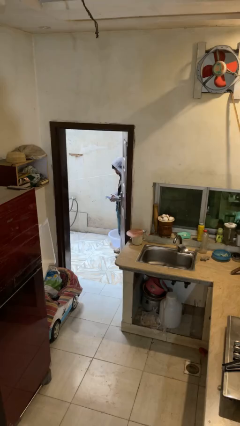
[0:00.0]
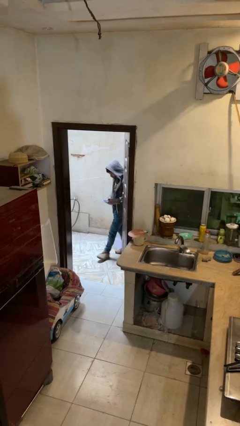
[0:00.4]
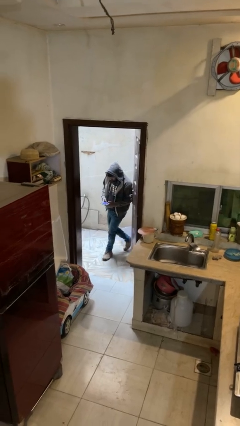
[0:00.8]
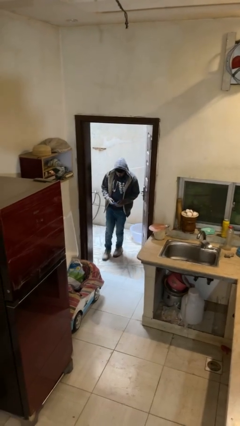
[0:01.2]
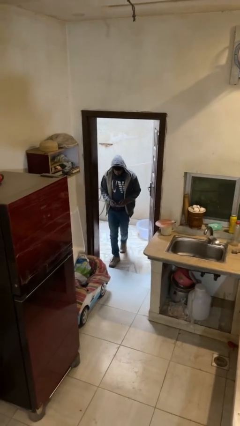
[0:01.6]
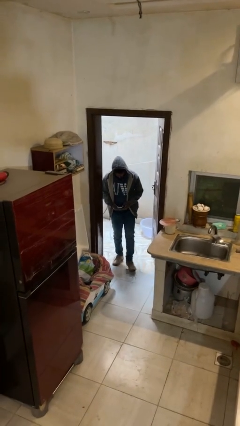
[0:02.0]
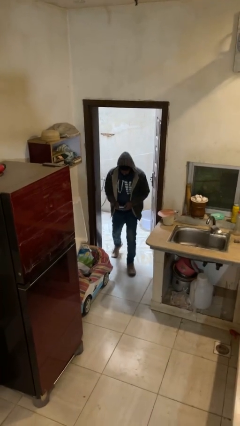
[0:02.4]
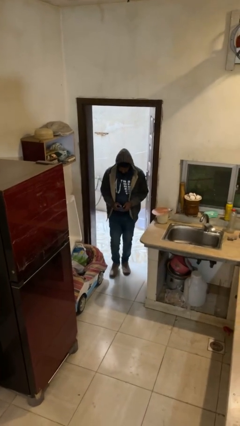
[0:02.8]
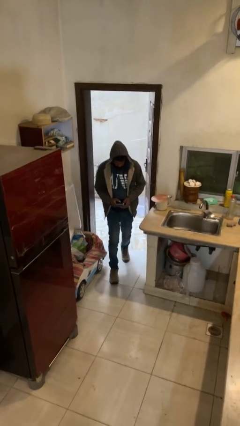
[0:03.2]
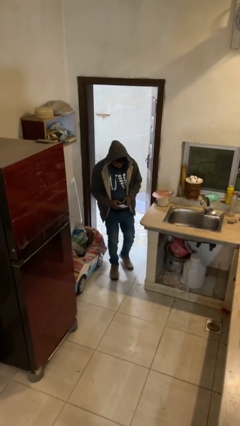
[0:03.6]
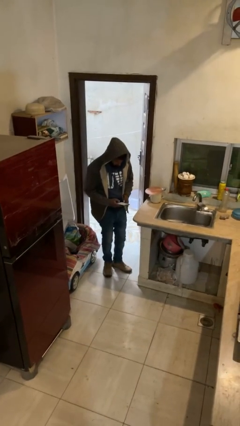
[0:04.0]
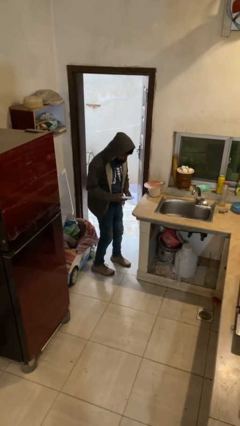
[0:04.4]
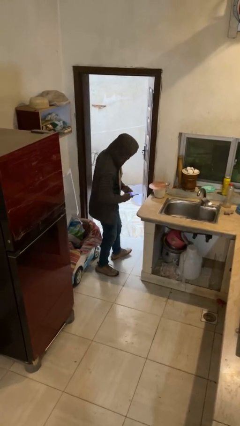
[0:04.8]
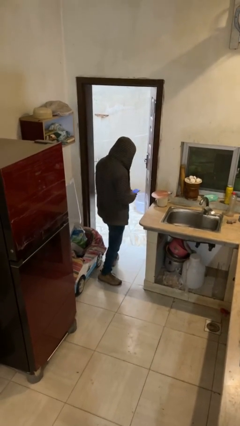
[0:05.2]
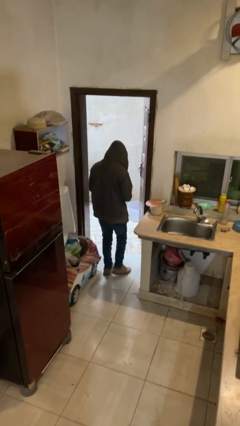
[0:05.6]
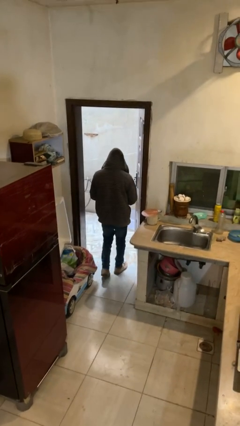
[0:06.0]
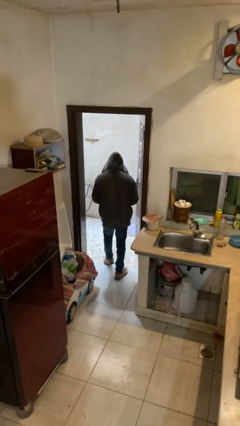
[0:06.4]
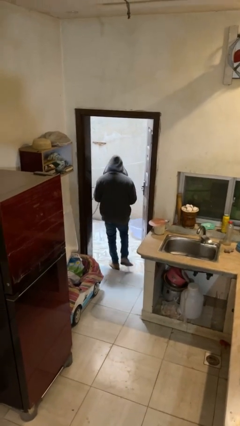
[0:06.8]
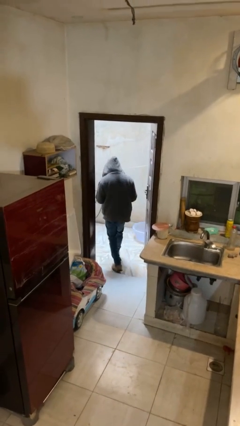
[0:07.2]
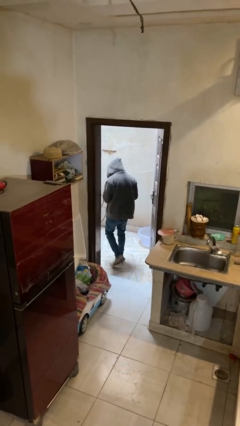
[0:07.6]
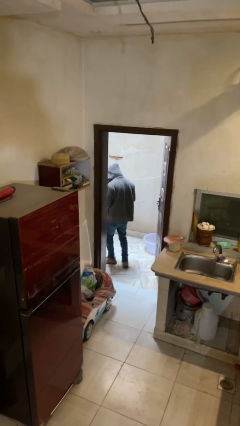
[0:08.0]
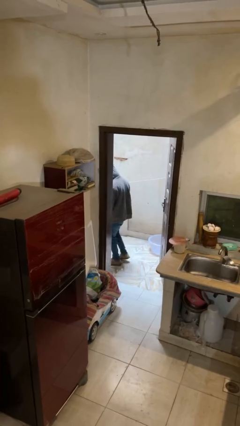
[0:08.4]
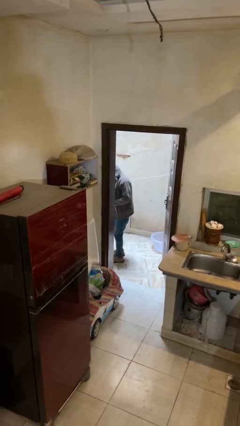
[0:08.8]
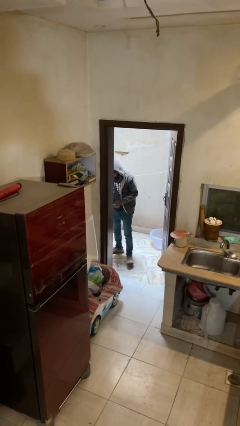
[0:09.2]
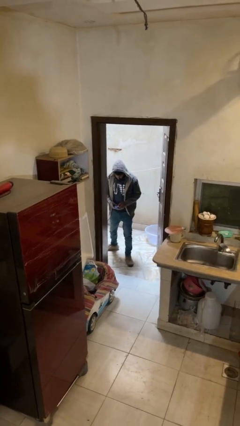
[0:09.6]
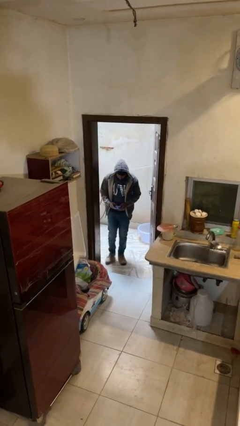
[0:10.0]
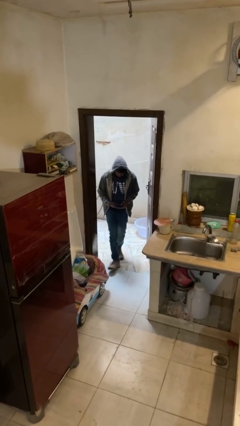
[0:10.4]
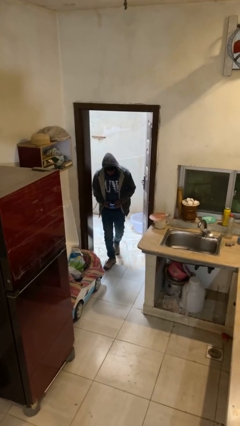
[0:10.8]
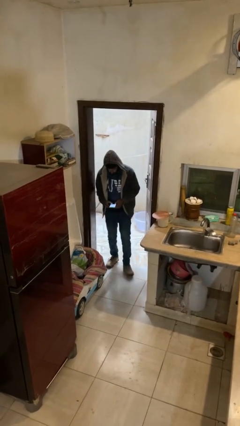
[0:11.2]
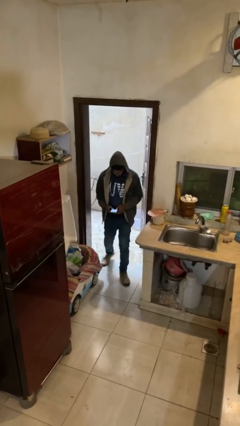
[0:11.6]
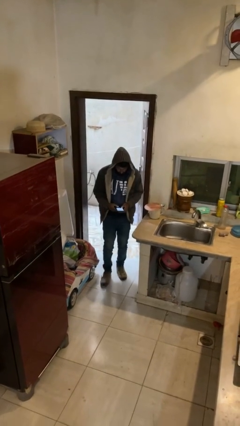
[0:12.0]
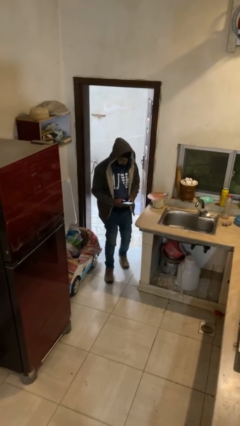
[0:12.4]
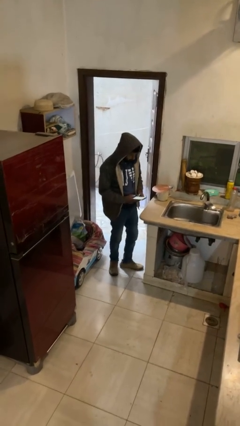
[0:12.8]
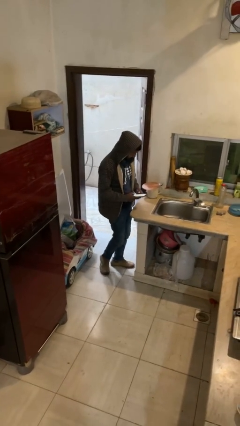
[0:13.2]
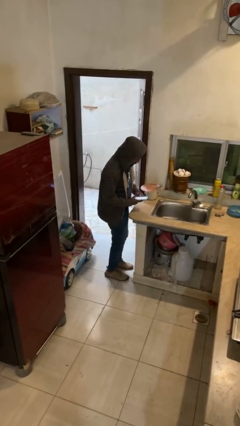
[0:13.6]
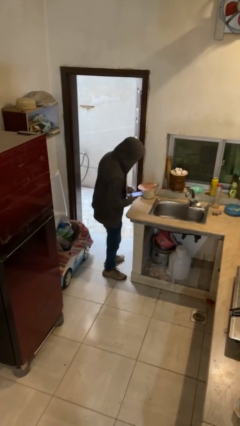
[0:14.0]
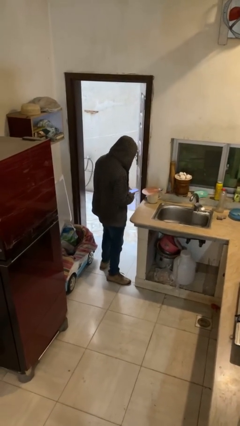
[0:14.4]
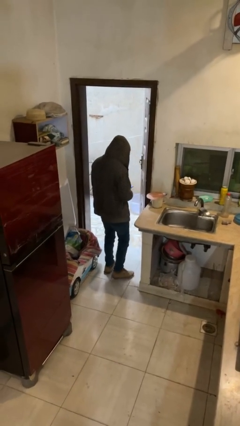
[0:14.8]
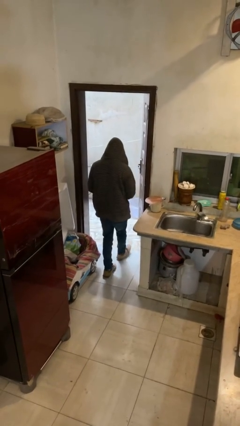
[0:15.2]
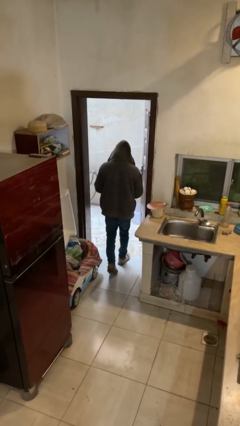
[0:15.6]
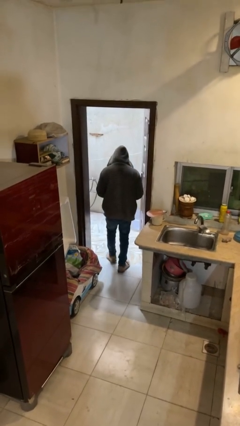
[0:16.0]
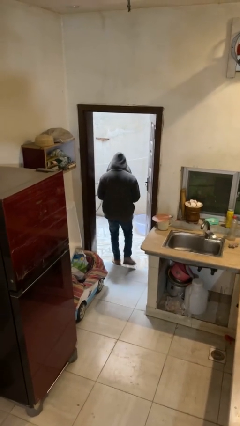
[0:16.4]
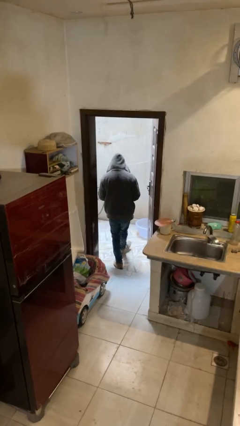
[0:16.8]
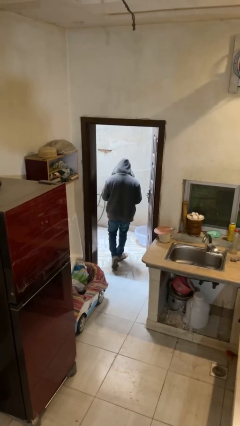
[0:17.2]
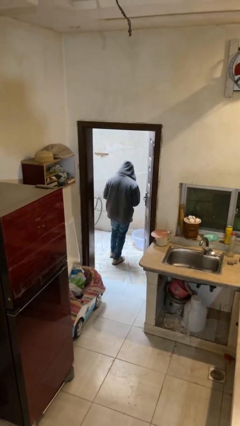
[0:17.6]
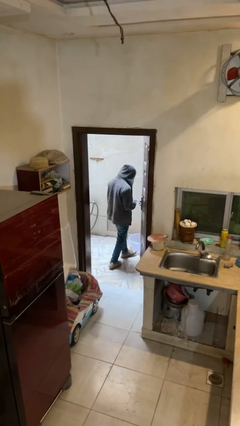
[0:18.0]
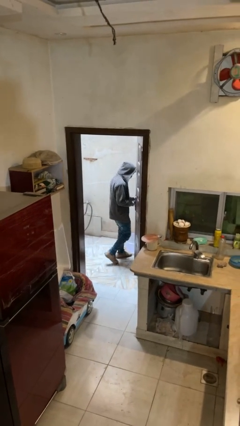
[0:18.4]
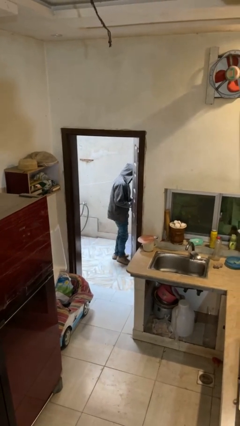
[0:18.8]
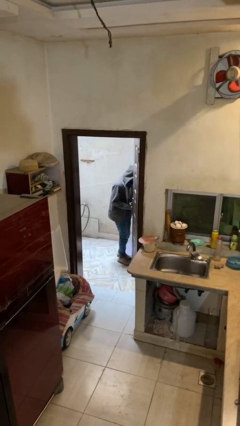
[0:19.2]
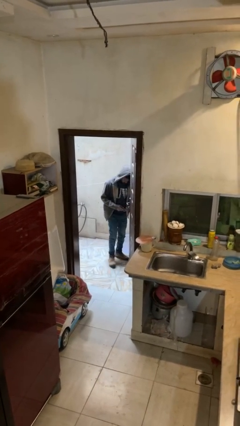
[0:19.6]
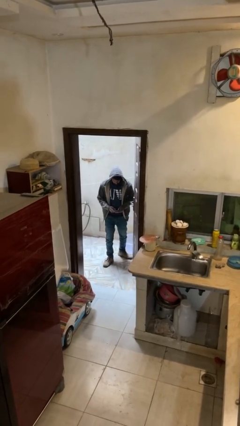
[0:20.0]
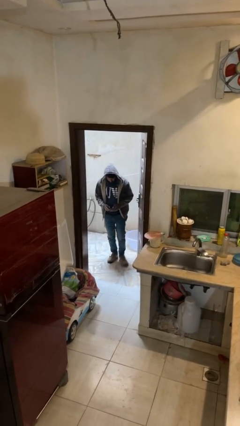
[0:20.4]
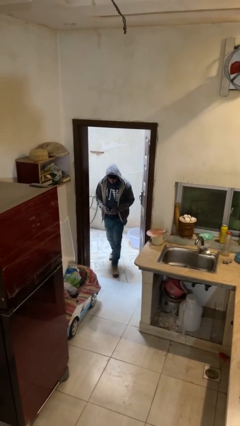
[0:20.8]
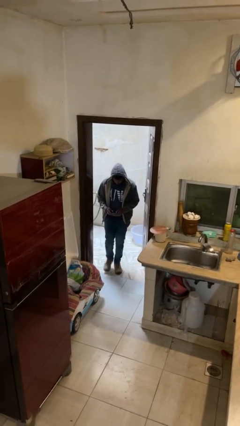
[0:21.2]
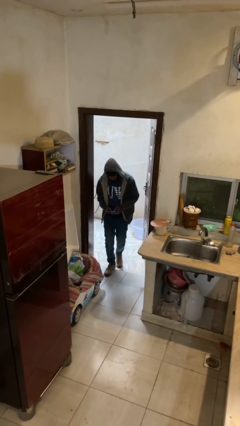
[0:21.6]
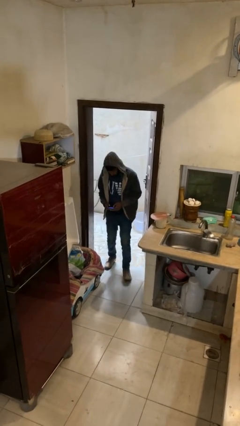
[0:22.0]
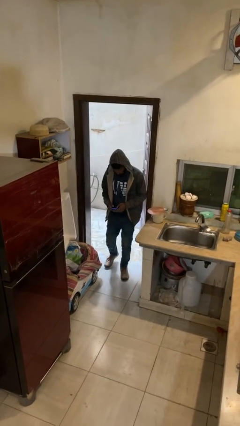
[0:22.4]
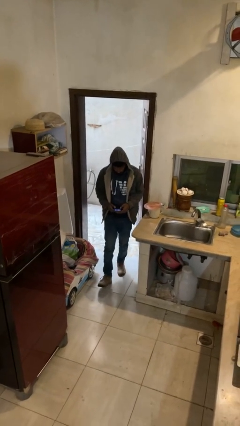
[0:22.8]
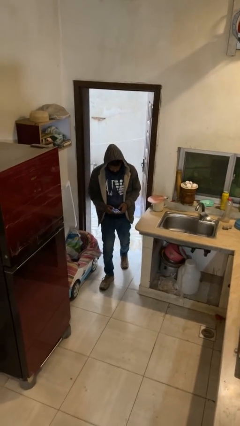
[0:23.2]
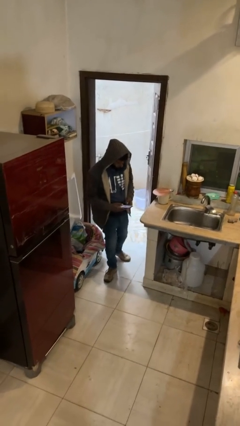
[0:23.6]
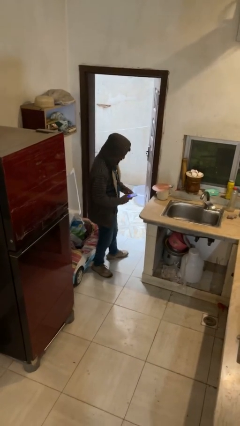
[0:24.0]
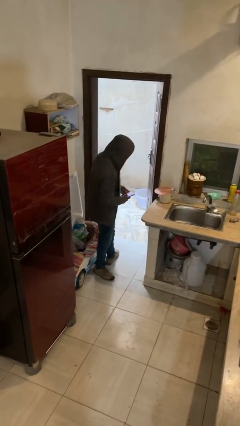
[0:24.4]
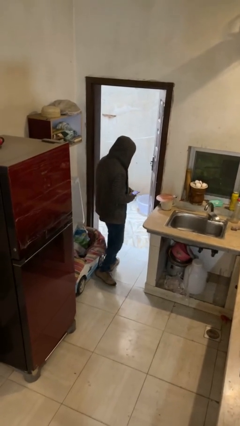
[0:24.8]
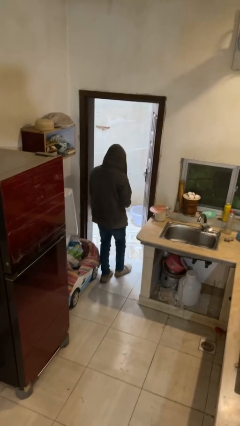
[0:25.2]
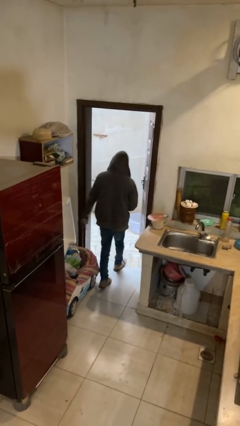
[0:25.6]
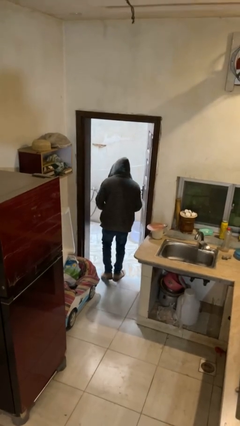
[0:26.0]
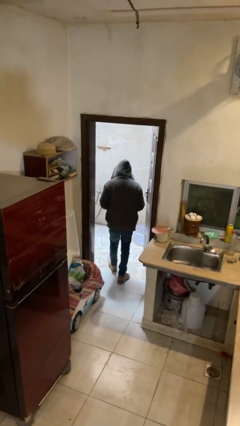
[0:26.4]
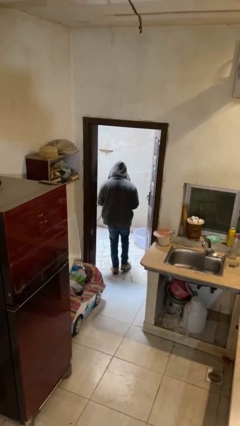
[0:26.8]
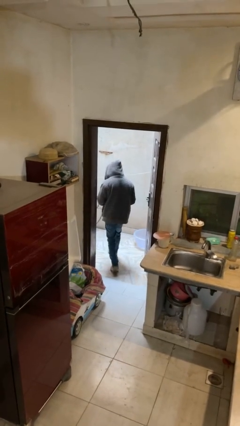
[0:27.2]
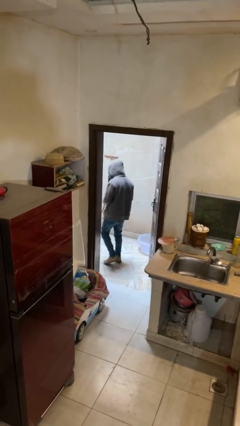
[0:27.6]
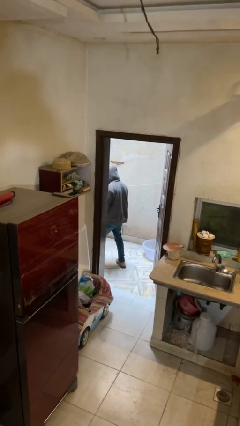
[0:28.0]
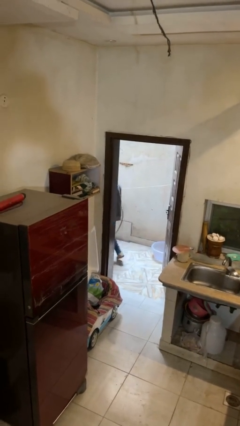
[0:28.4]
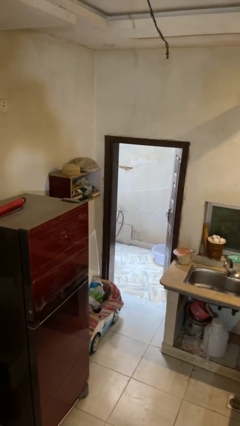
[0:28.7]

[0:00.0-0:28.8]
person texts on phone

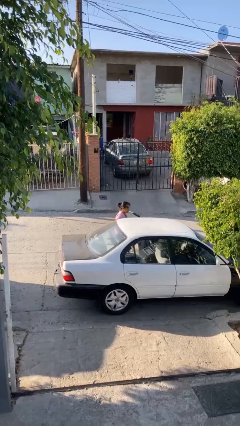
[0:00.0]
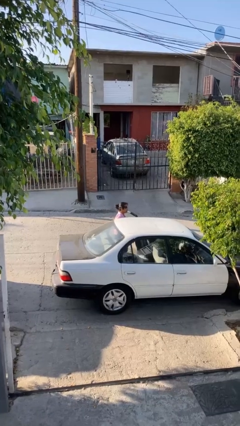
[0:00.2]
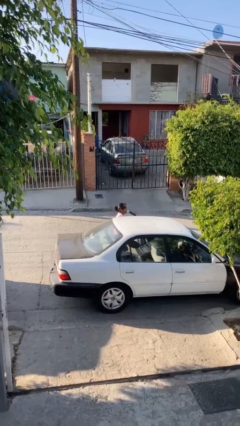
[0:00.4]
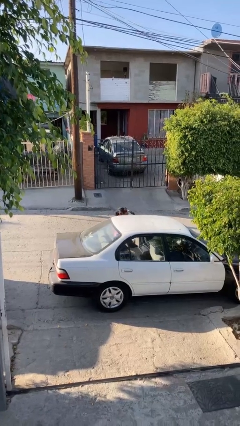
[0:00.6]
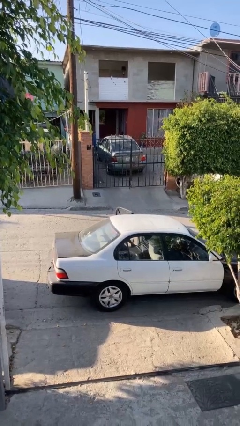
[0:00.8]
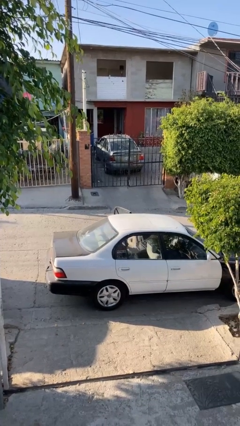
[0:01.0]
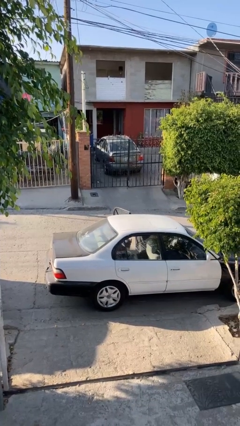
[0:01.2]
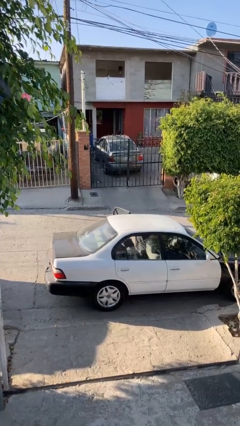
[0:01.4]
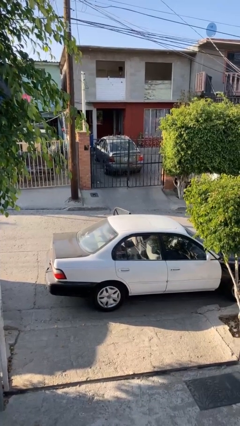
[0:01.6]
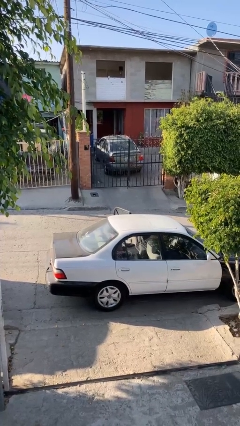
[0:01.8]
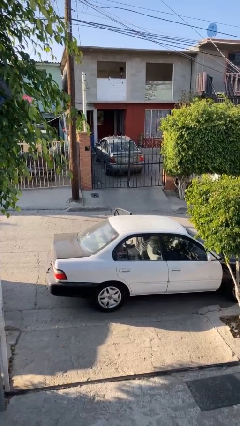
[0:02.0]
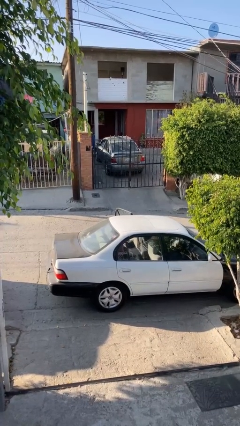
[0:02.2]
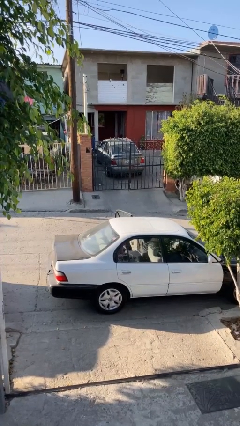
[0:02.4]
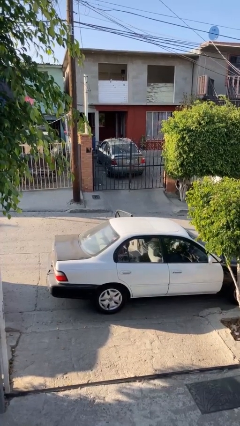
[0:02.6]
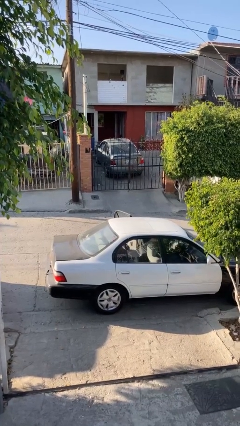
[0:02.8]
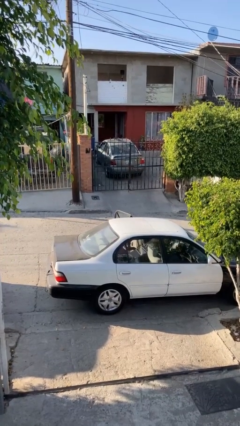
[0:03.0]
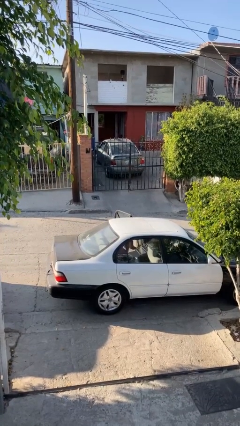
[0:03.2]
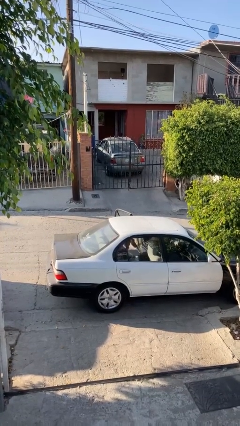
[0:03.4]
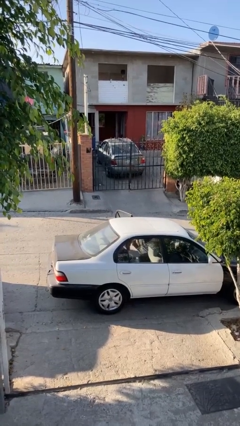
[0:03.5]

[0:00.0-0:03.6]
person enters car

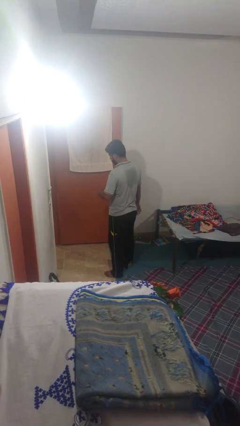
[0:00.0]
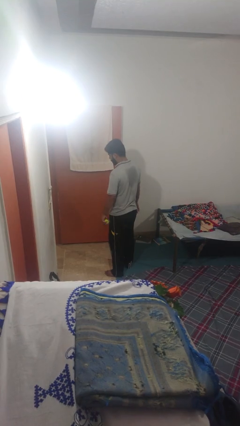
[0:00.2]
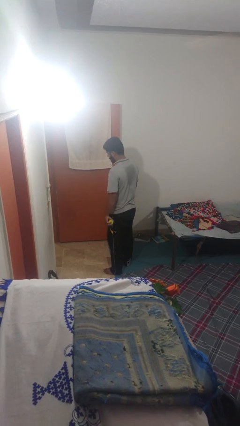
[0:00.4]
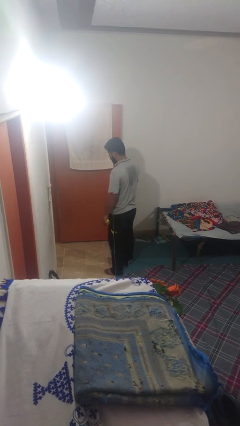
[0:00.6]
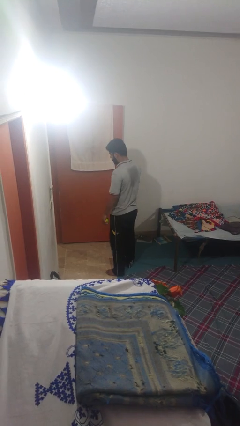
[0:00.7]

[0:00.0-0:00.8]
person bounces ball on floor
